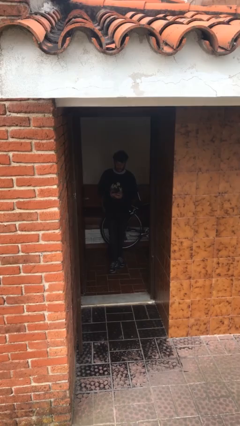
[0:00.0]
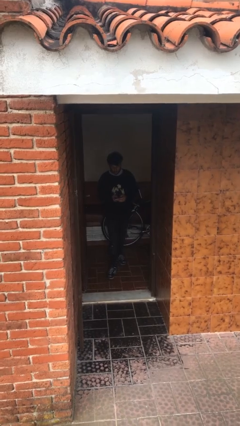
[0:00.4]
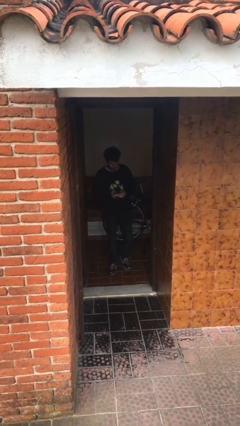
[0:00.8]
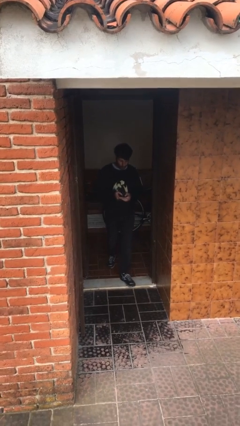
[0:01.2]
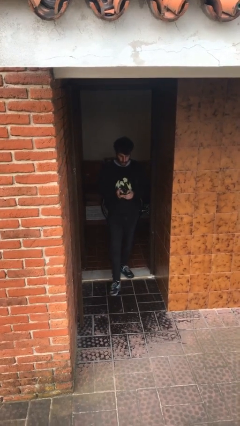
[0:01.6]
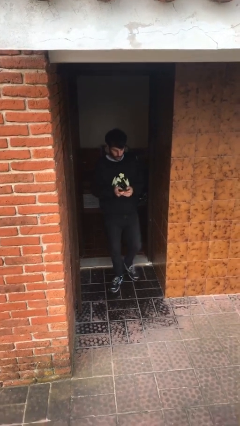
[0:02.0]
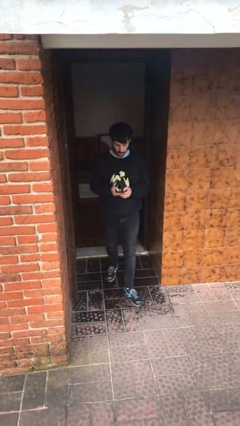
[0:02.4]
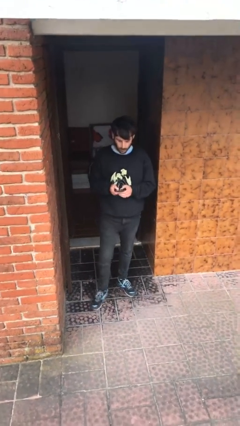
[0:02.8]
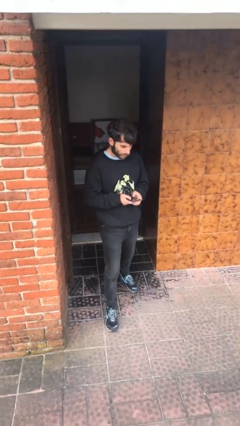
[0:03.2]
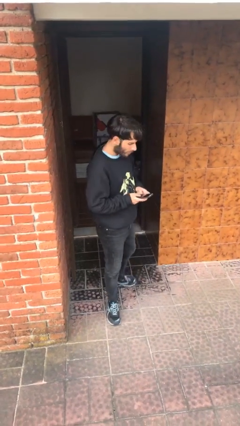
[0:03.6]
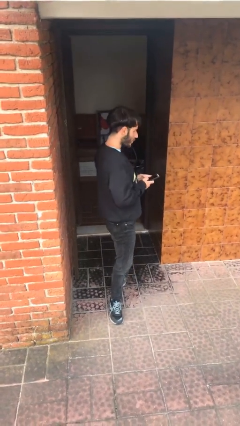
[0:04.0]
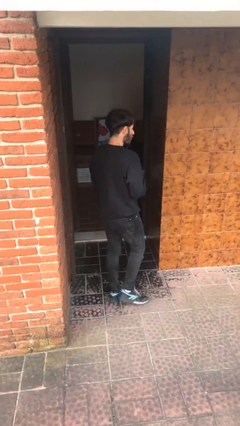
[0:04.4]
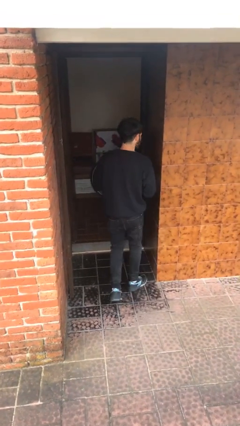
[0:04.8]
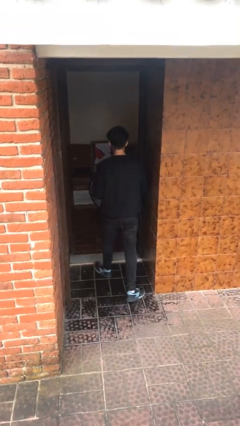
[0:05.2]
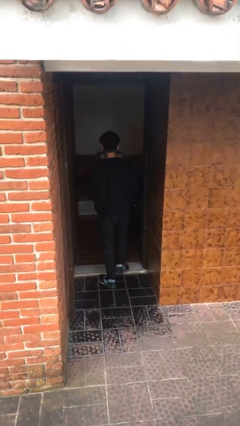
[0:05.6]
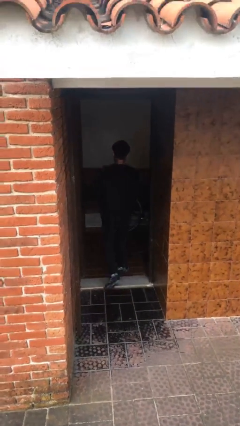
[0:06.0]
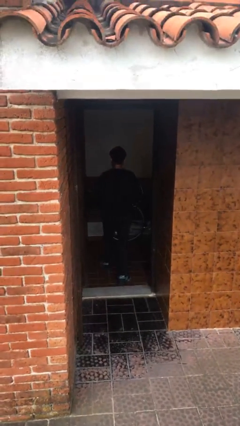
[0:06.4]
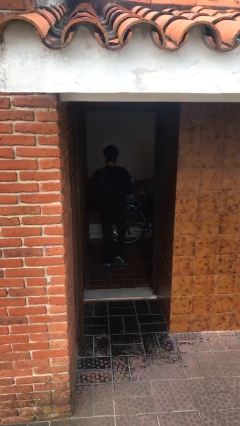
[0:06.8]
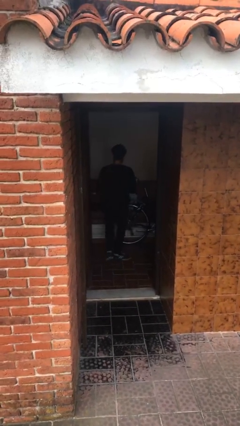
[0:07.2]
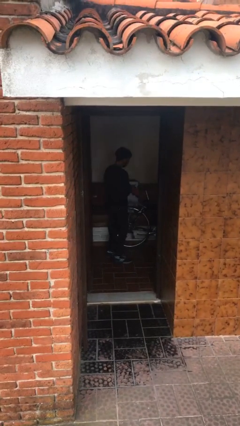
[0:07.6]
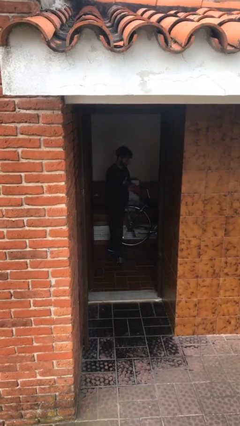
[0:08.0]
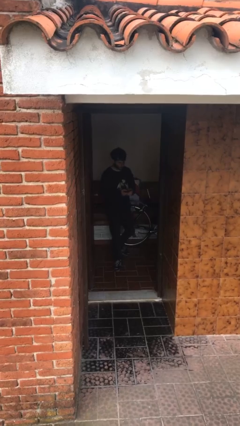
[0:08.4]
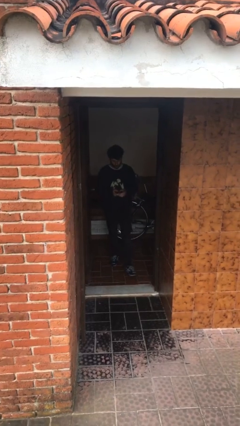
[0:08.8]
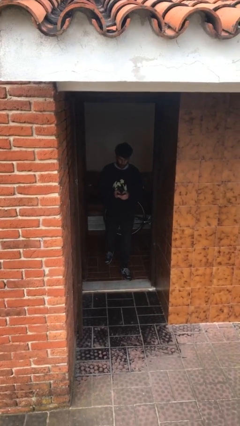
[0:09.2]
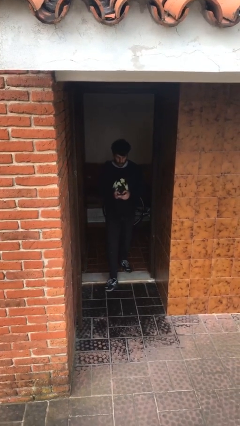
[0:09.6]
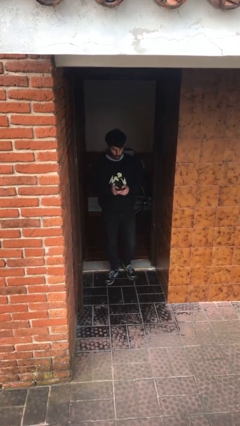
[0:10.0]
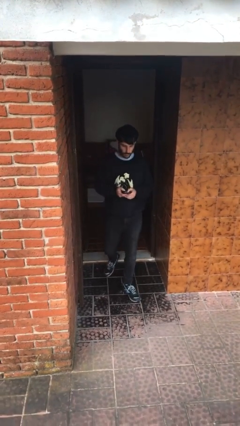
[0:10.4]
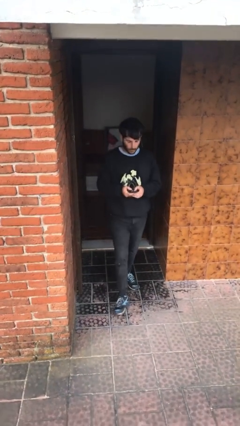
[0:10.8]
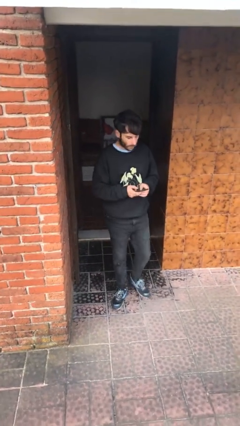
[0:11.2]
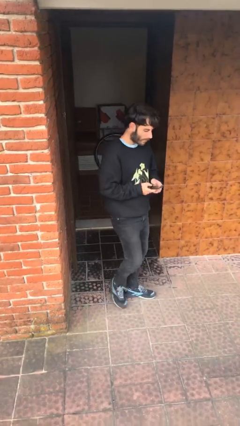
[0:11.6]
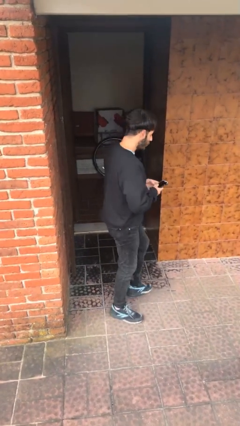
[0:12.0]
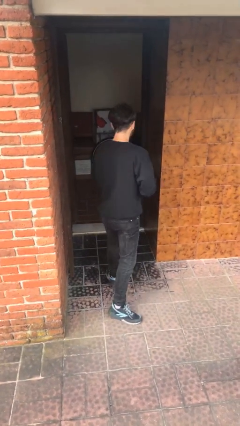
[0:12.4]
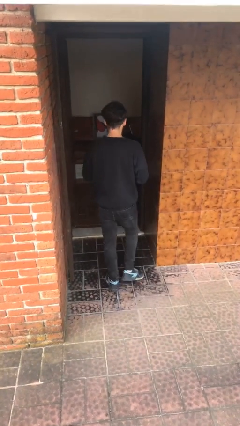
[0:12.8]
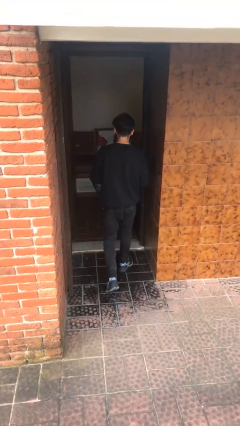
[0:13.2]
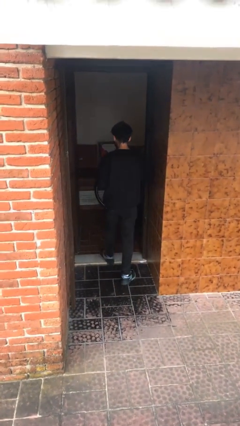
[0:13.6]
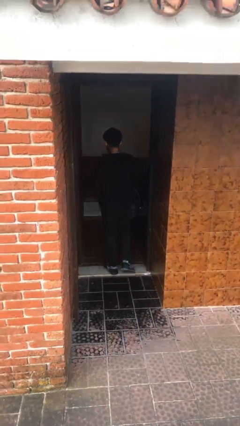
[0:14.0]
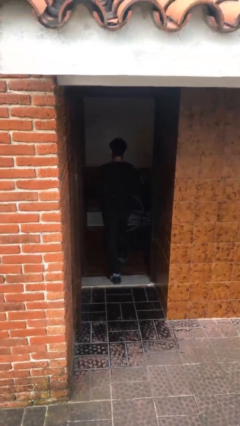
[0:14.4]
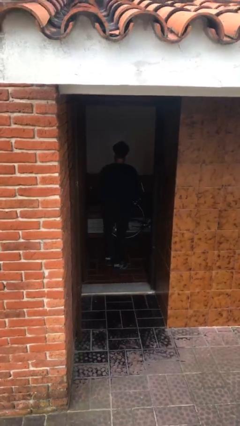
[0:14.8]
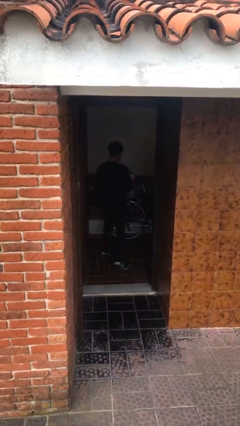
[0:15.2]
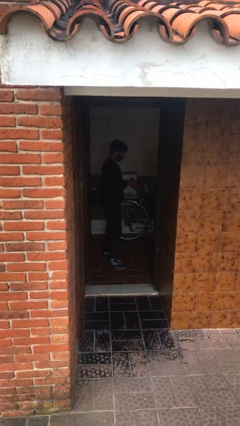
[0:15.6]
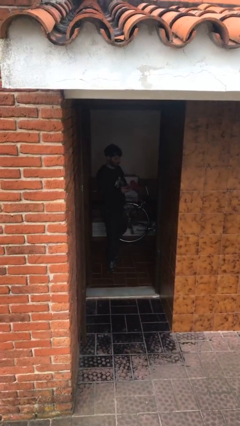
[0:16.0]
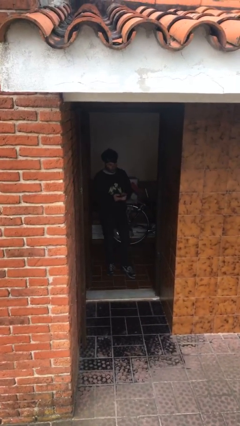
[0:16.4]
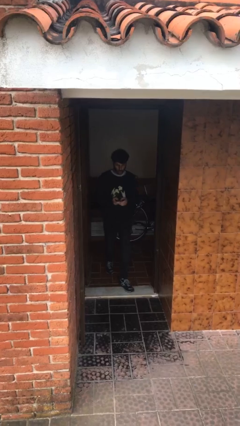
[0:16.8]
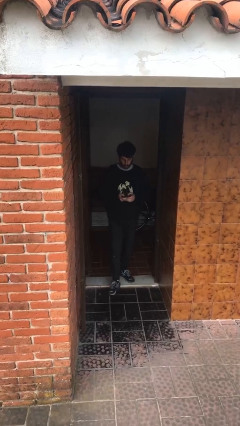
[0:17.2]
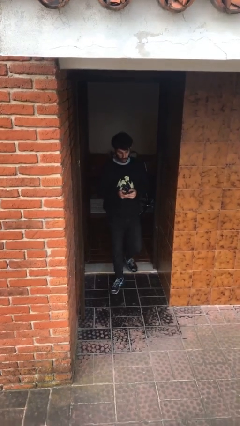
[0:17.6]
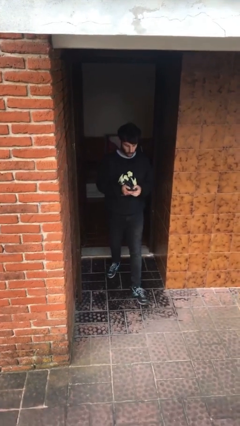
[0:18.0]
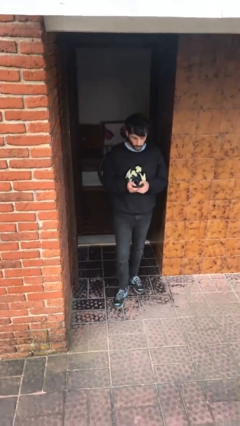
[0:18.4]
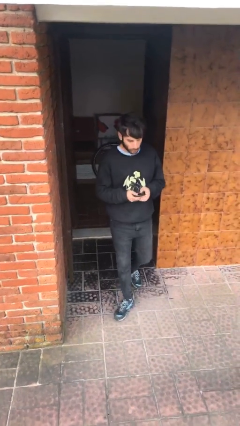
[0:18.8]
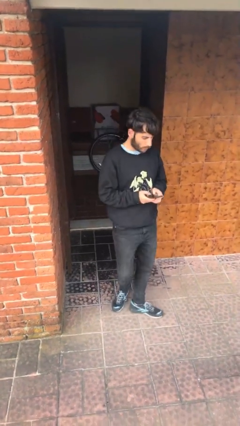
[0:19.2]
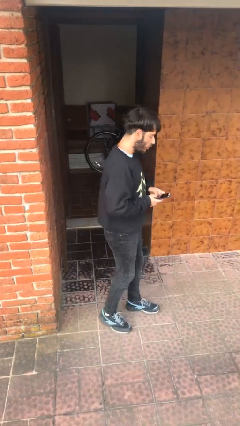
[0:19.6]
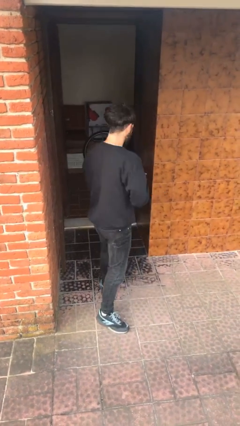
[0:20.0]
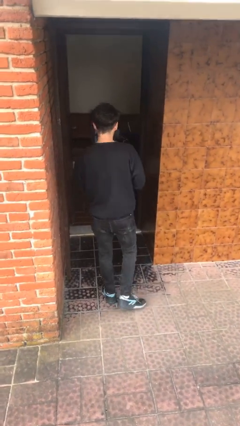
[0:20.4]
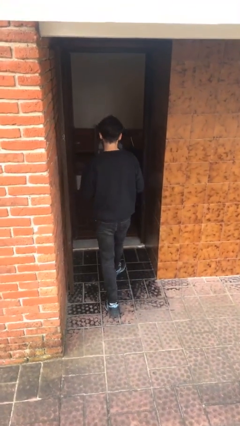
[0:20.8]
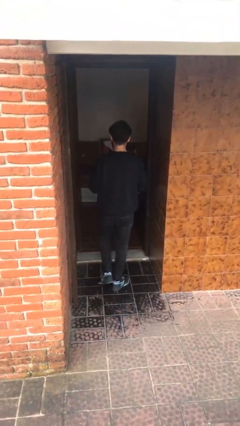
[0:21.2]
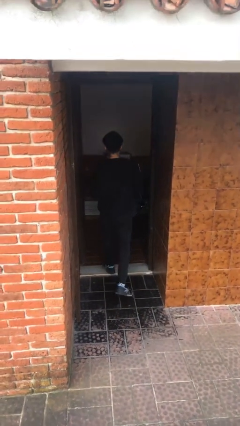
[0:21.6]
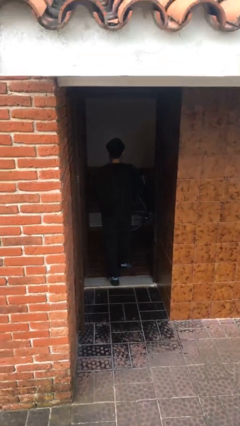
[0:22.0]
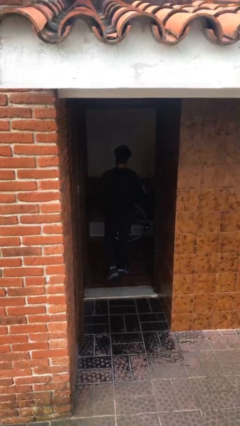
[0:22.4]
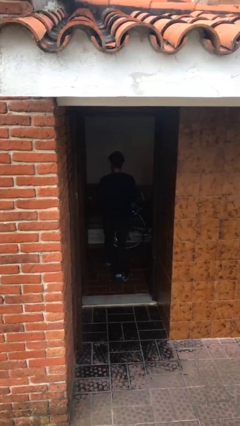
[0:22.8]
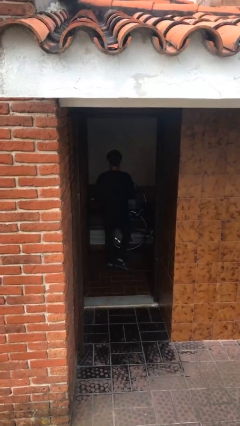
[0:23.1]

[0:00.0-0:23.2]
person texts on phone

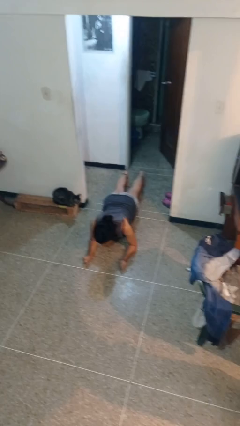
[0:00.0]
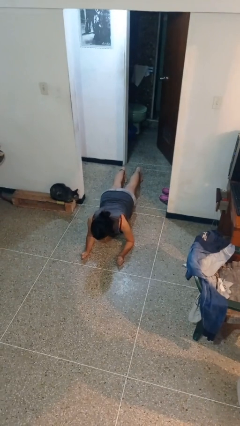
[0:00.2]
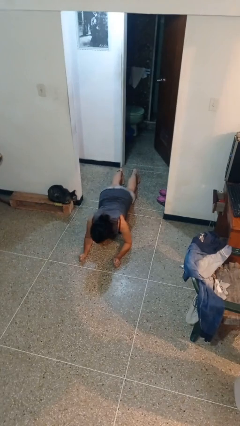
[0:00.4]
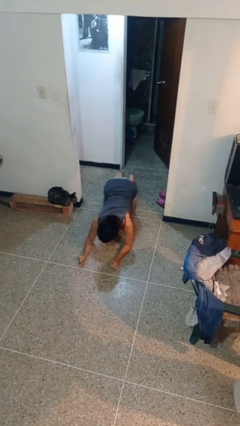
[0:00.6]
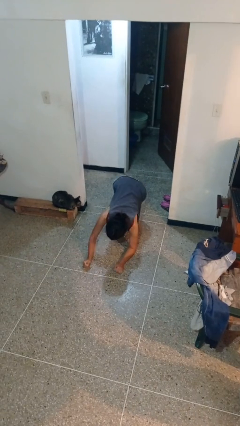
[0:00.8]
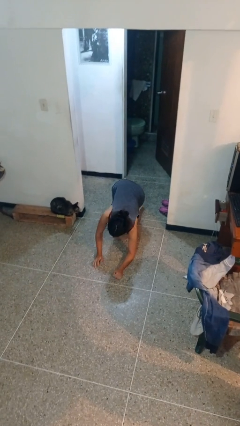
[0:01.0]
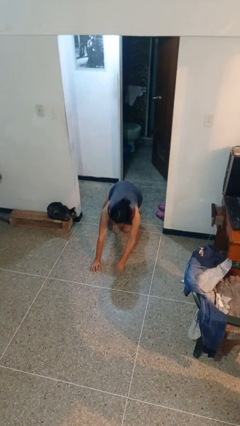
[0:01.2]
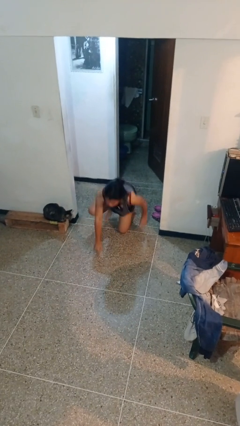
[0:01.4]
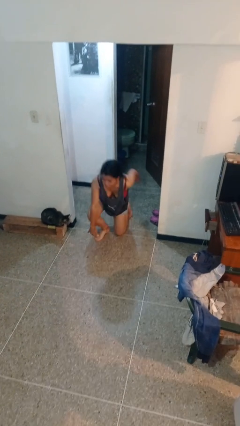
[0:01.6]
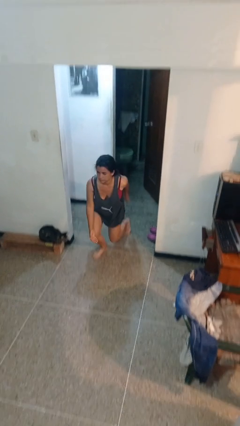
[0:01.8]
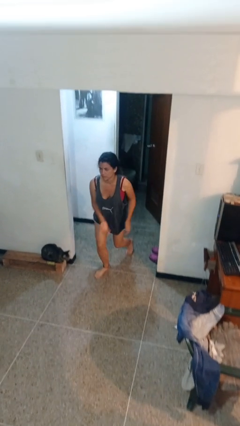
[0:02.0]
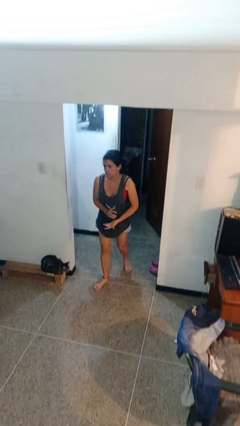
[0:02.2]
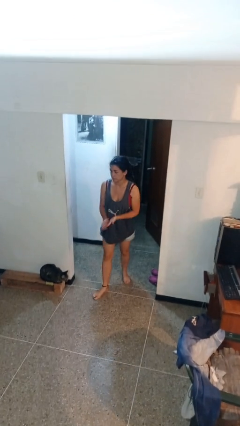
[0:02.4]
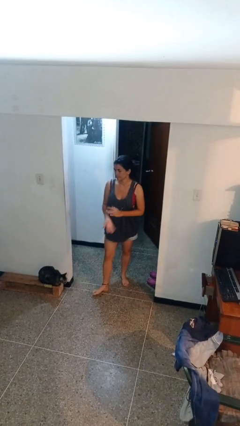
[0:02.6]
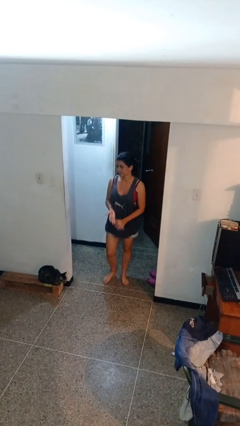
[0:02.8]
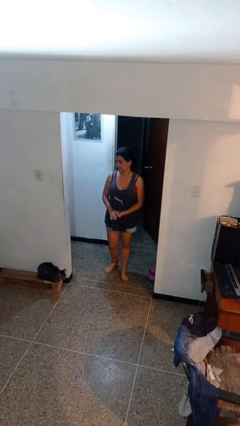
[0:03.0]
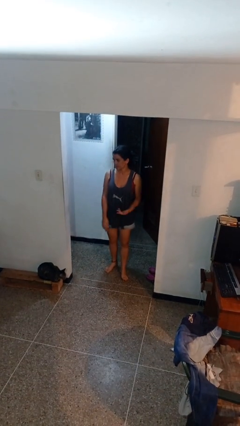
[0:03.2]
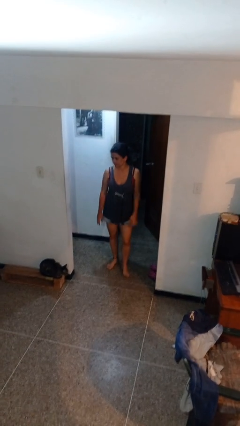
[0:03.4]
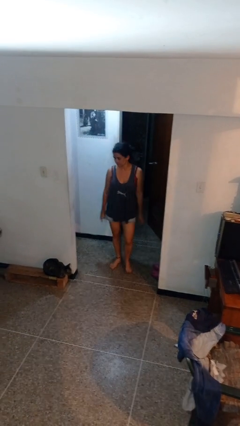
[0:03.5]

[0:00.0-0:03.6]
person stands up from floor

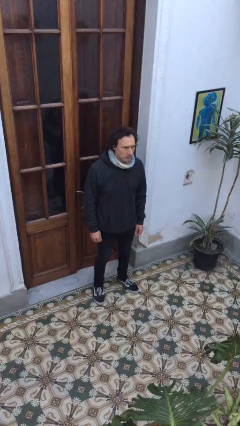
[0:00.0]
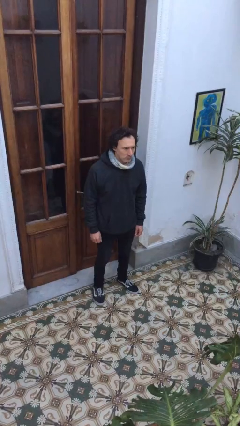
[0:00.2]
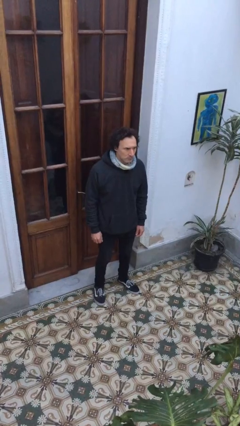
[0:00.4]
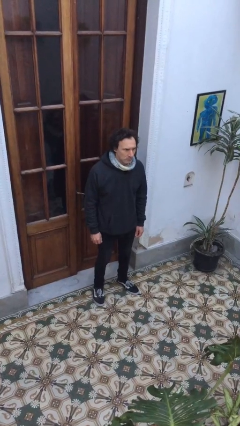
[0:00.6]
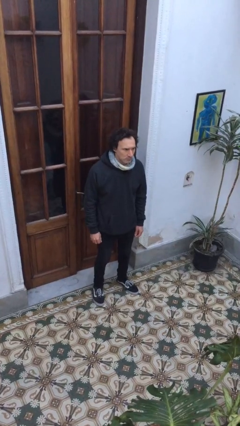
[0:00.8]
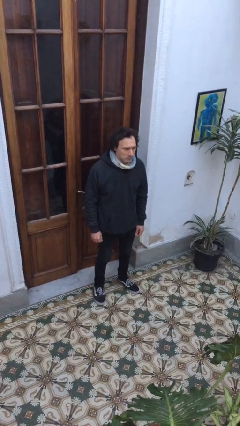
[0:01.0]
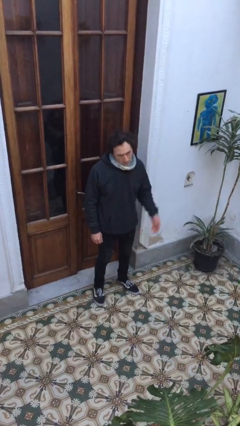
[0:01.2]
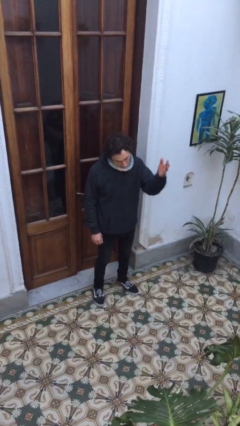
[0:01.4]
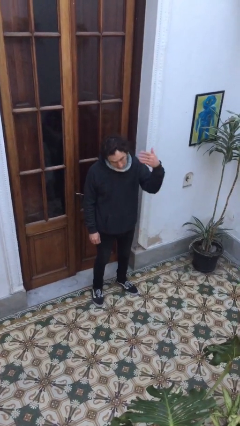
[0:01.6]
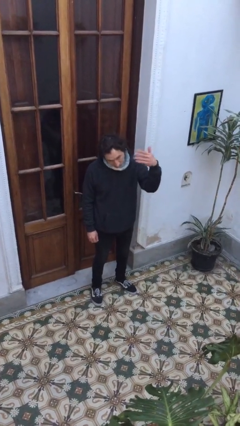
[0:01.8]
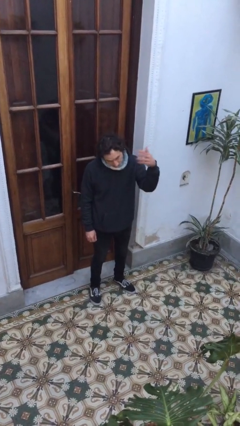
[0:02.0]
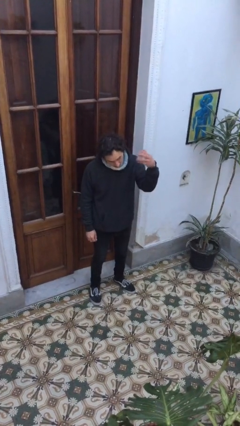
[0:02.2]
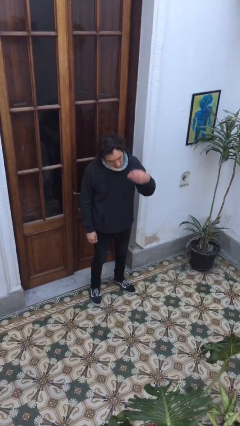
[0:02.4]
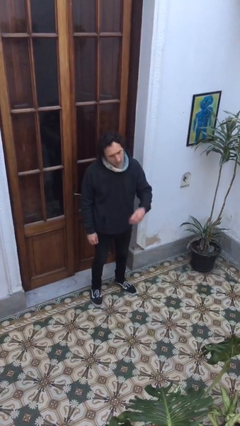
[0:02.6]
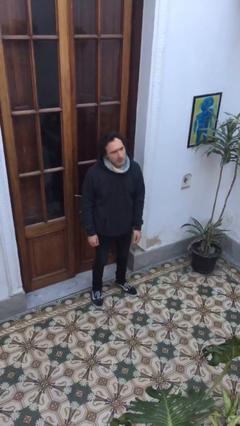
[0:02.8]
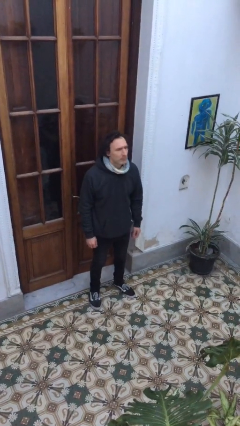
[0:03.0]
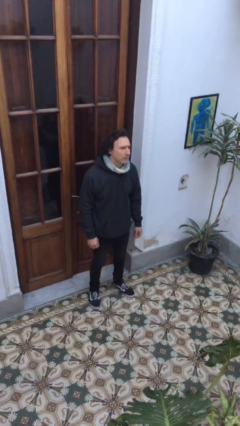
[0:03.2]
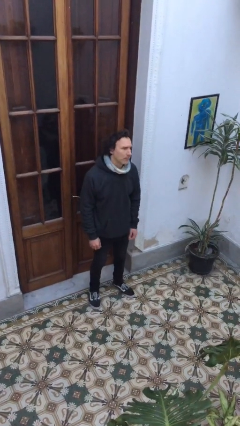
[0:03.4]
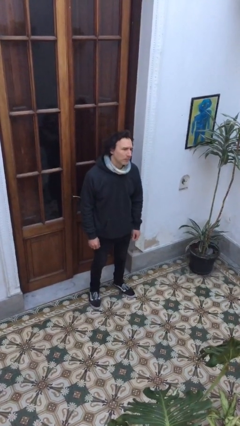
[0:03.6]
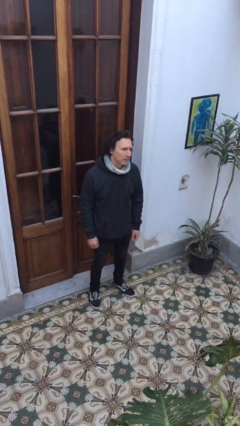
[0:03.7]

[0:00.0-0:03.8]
person gestures come here
